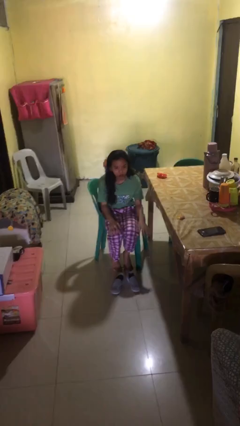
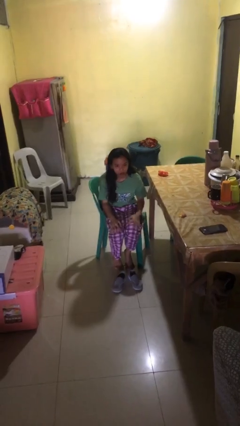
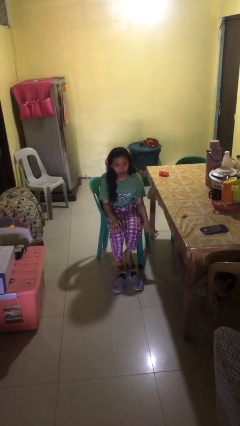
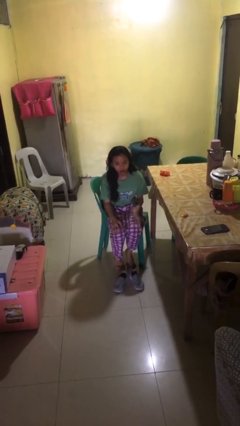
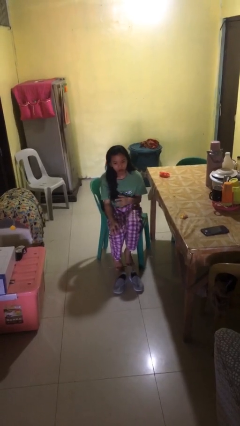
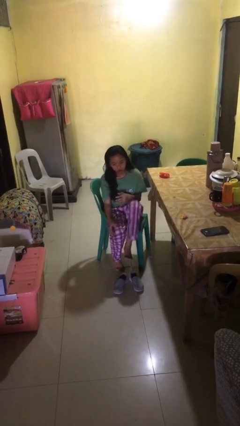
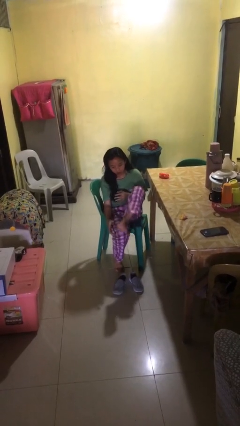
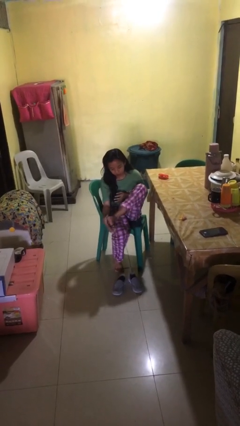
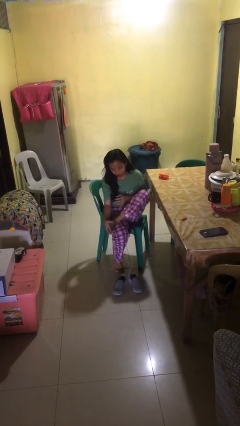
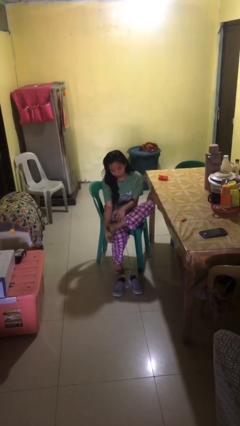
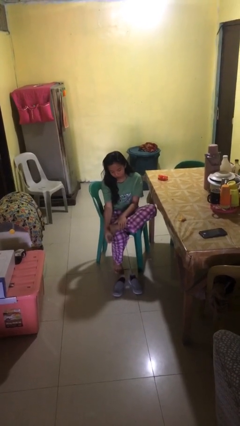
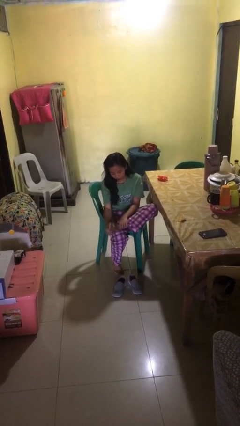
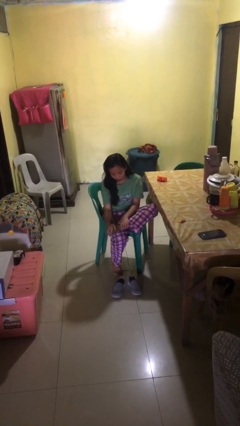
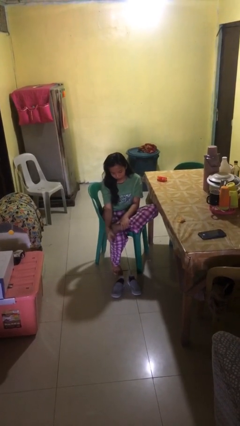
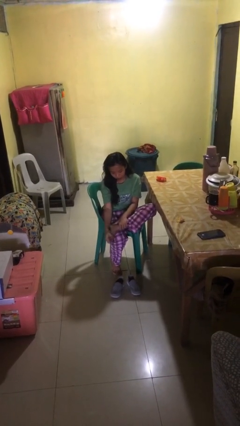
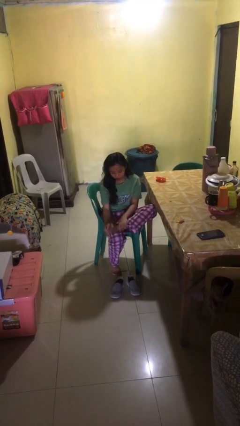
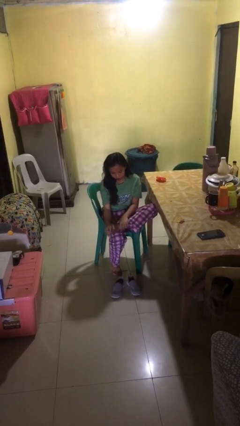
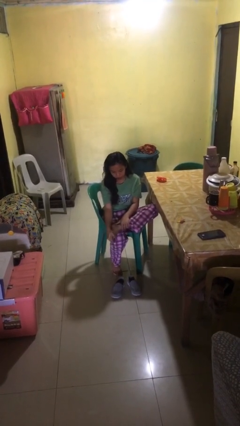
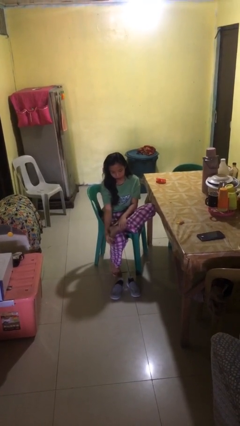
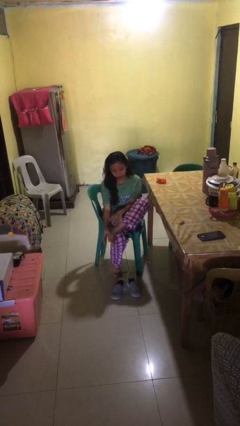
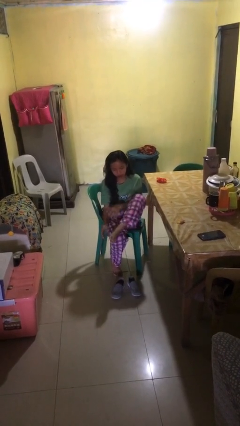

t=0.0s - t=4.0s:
person rubs foot

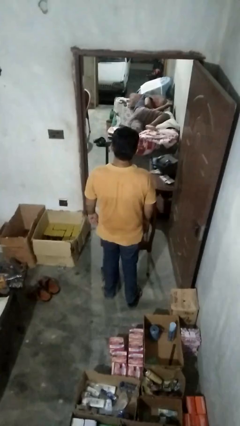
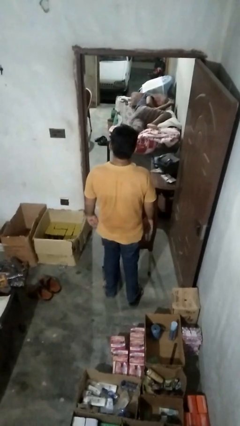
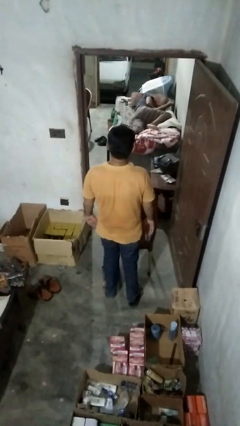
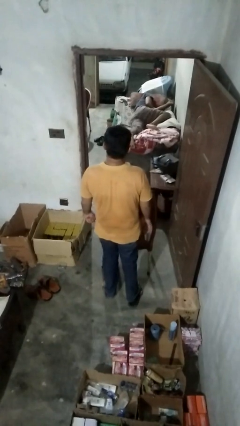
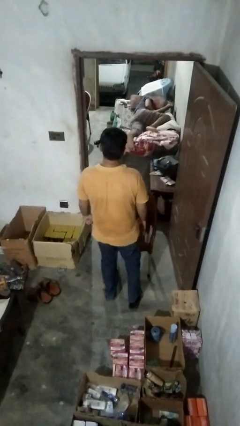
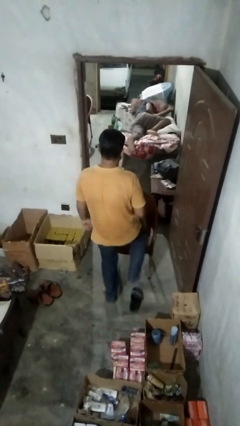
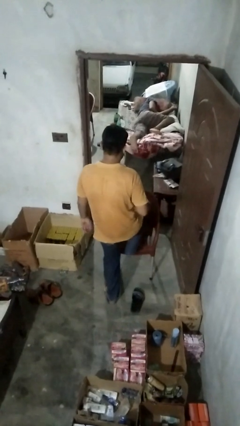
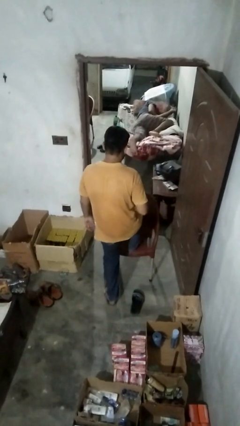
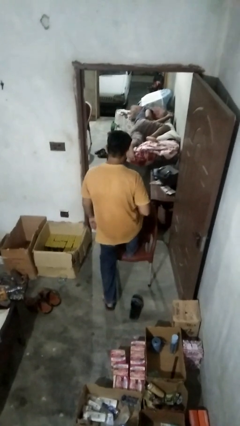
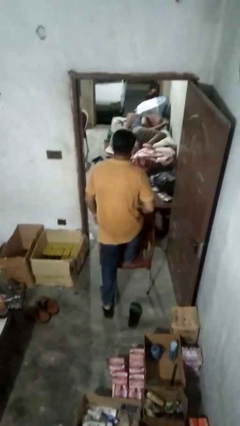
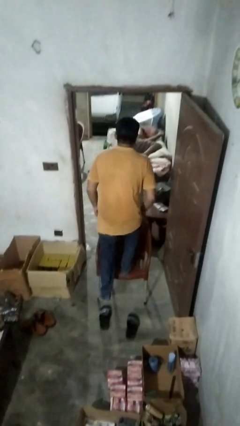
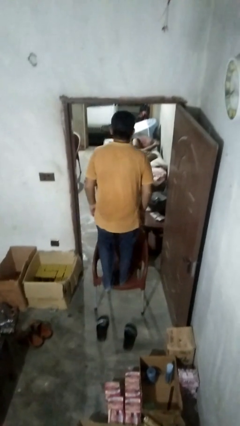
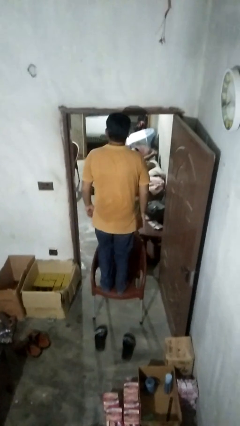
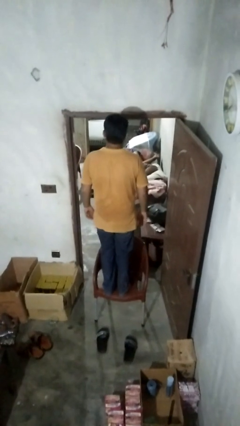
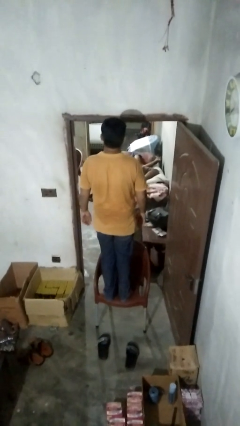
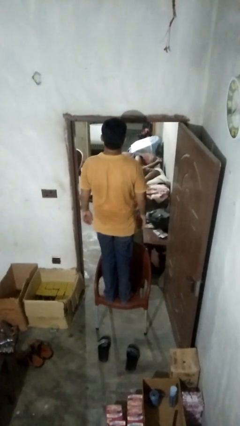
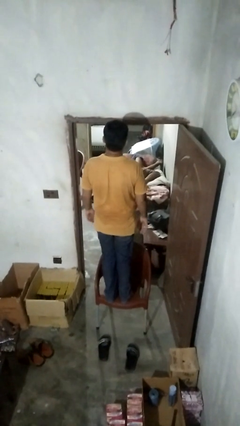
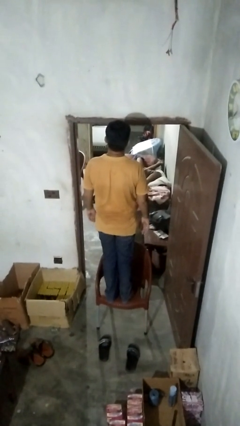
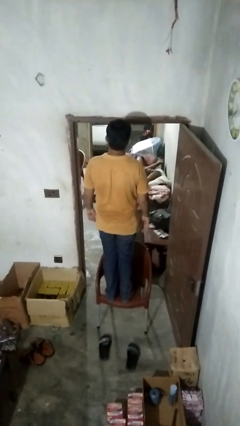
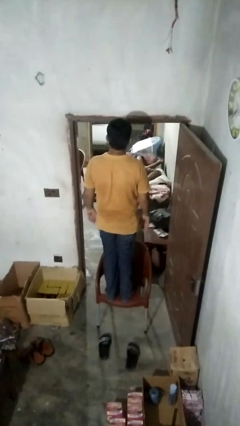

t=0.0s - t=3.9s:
person climbs on chair

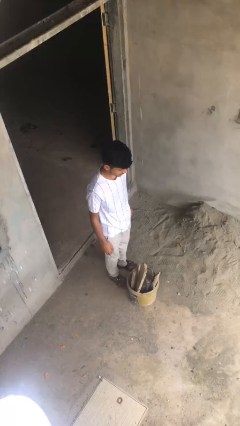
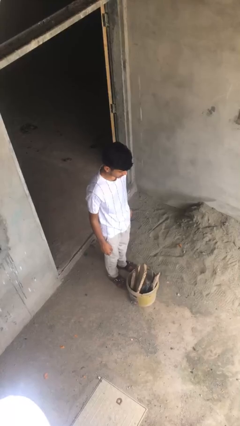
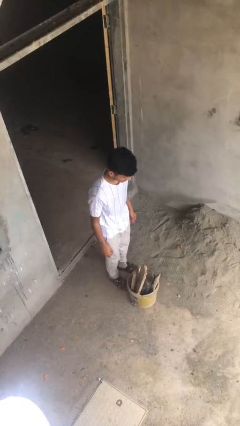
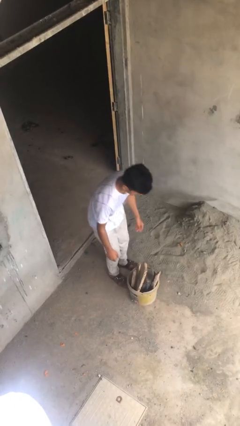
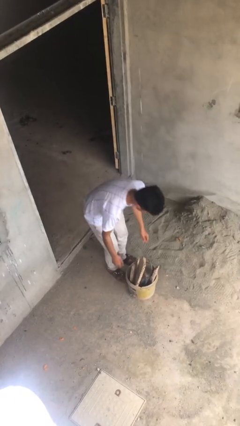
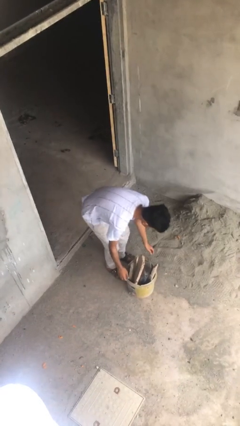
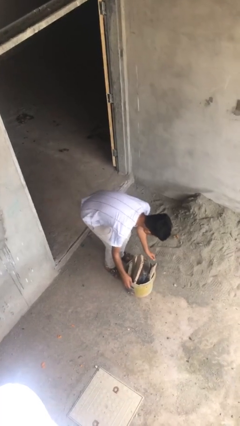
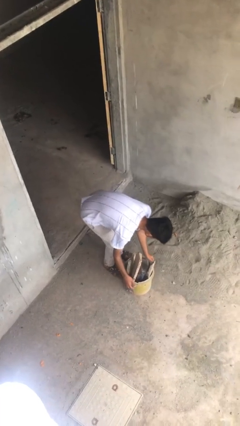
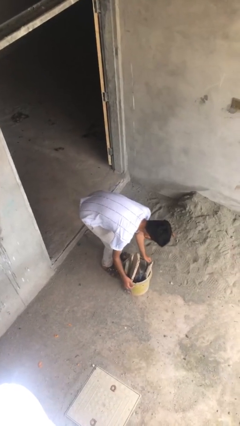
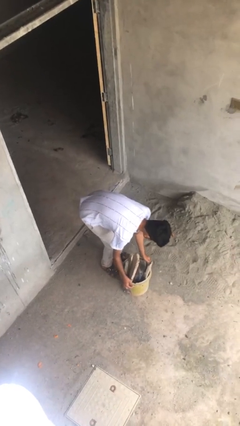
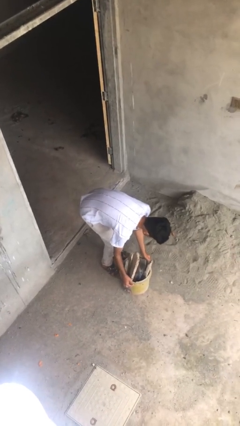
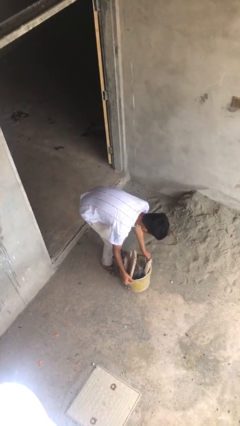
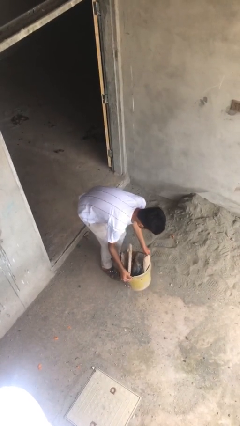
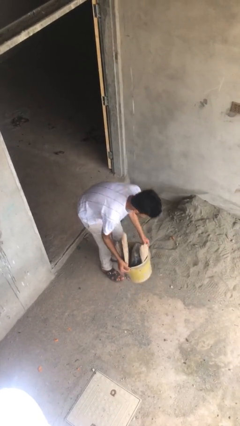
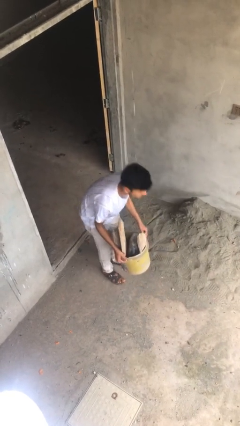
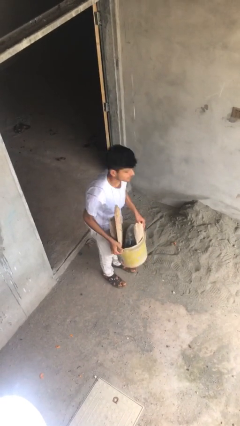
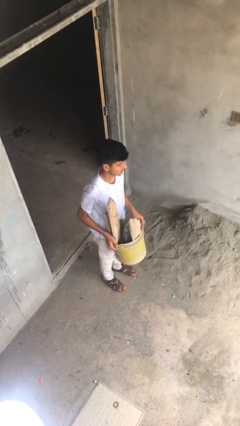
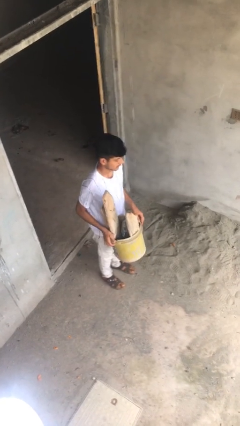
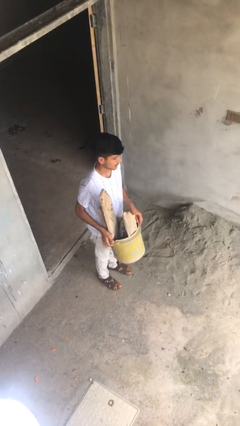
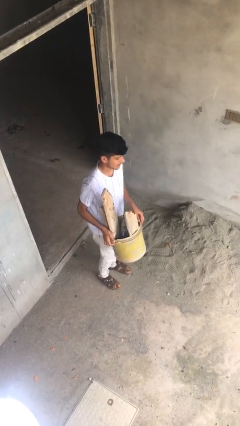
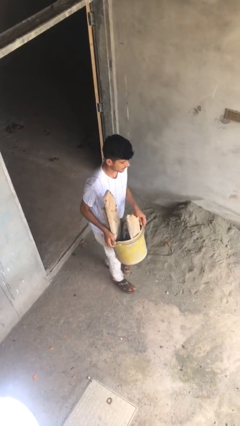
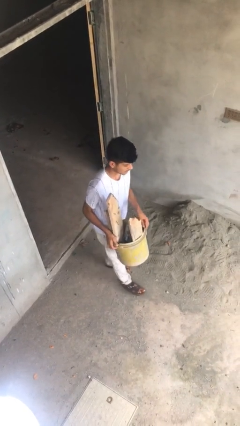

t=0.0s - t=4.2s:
person picks up object from floor

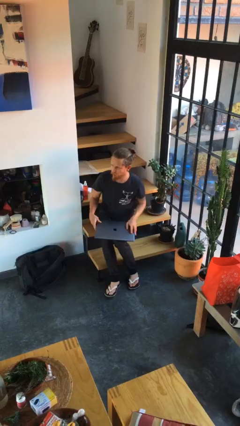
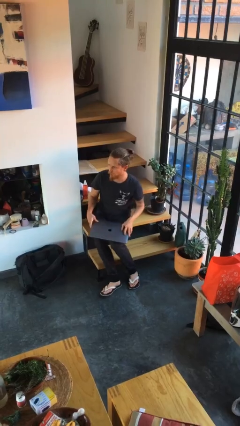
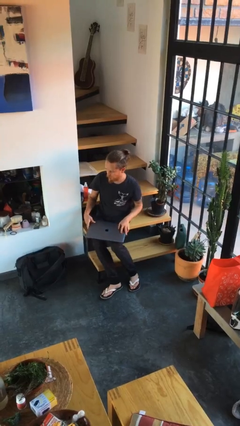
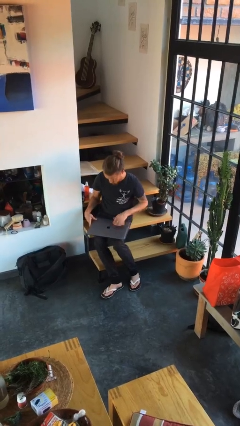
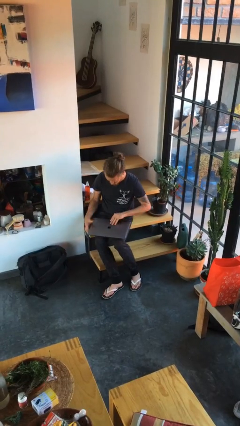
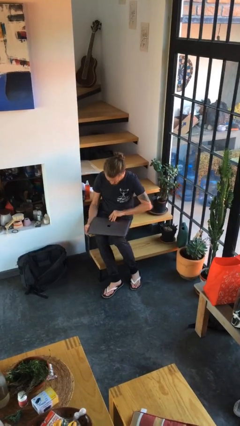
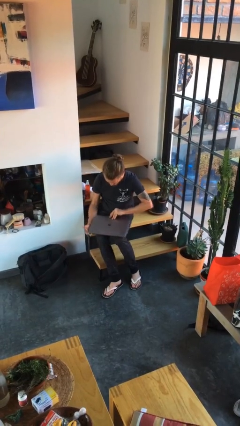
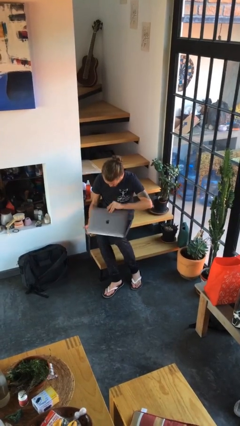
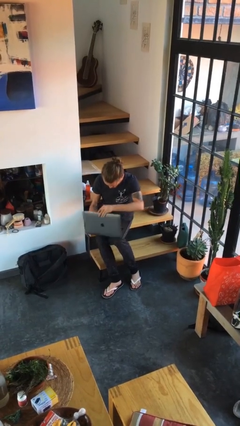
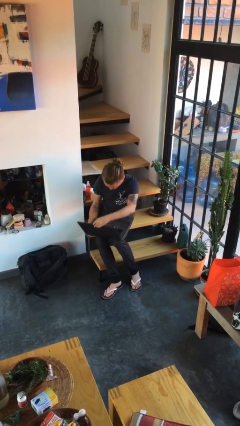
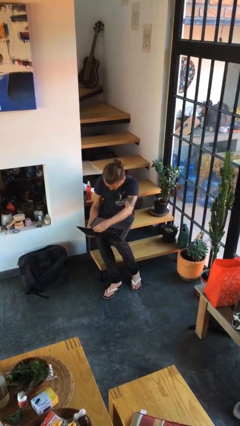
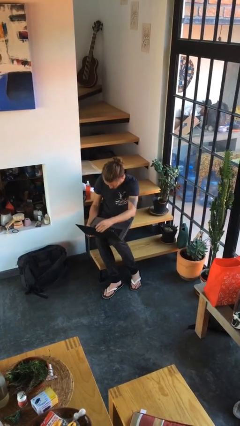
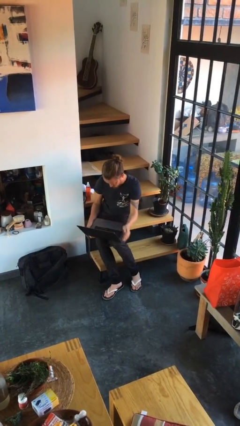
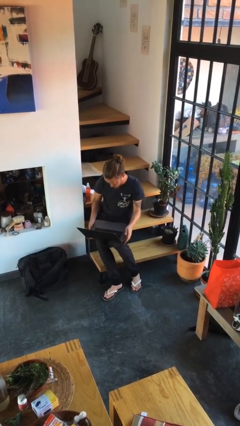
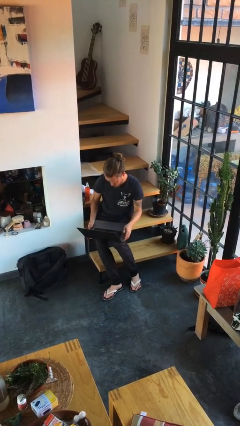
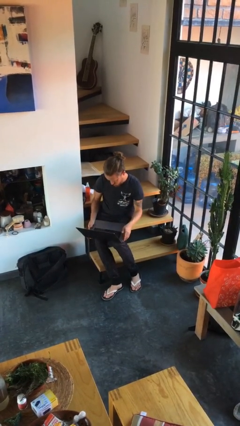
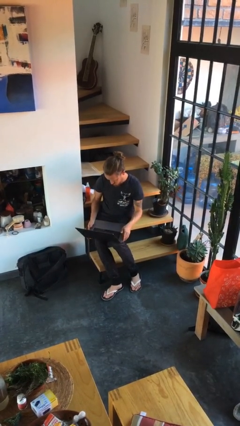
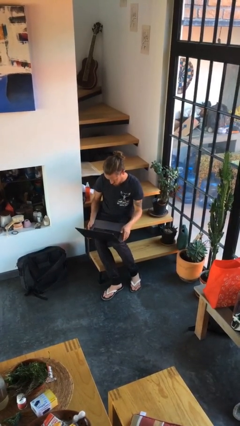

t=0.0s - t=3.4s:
person opens laptop

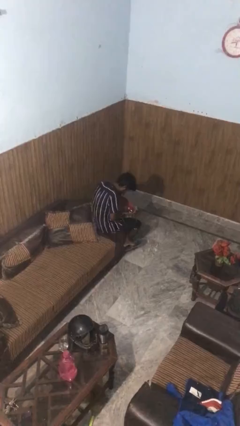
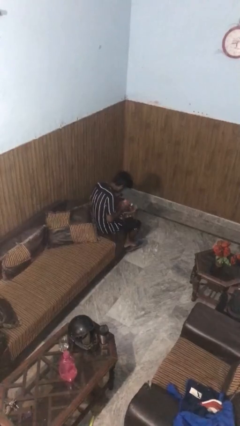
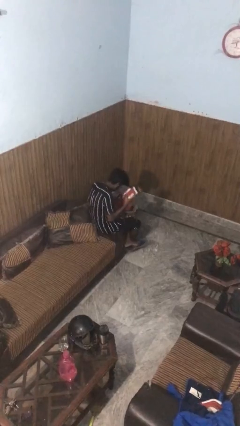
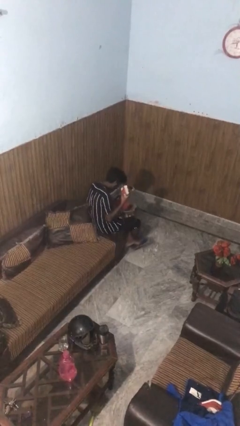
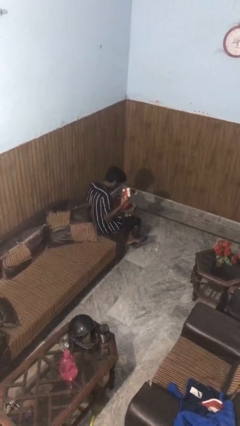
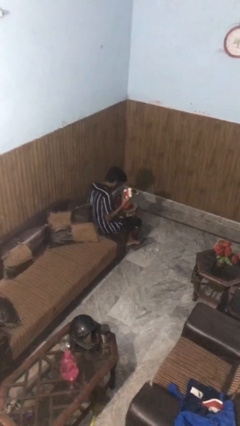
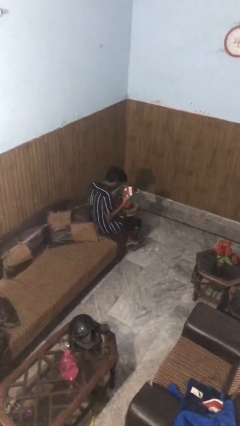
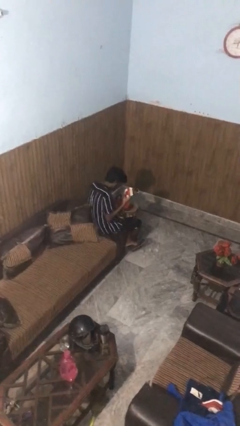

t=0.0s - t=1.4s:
person takes object from purse

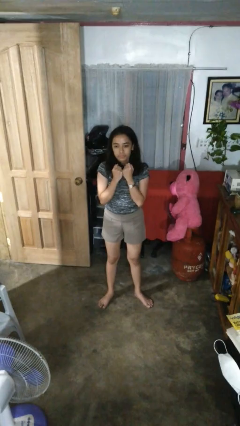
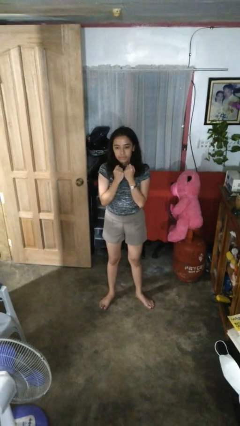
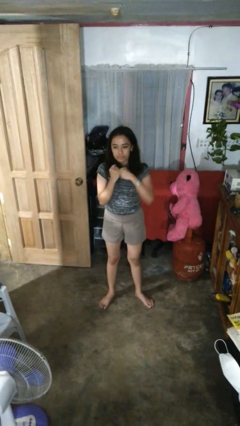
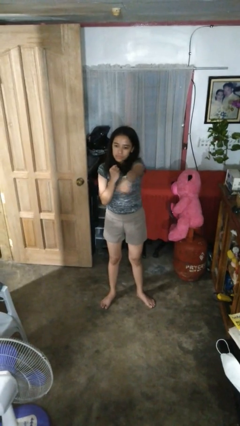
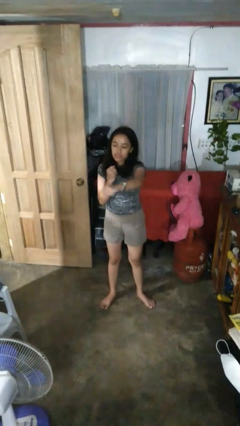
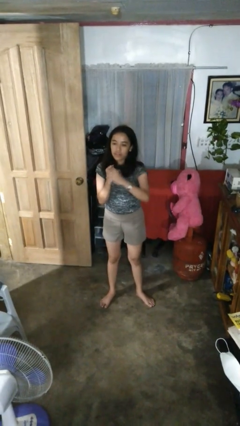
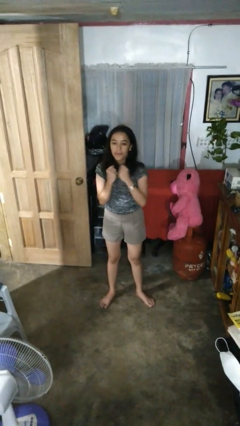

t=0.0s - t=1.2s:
person punches
